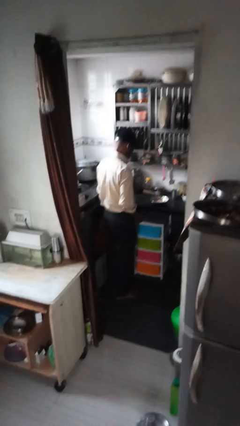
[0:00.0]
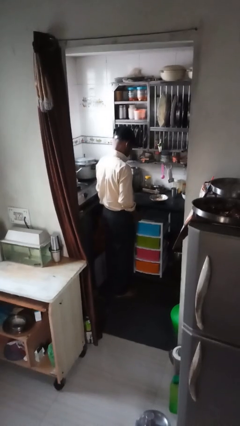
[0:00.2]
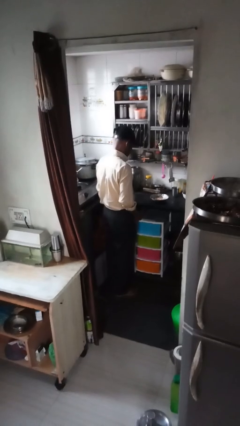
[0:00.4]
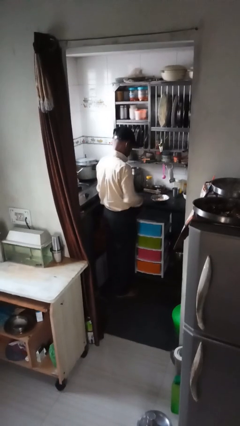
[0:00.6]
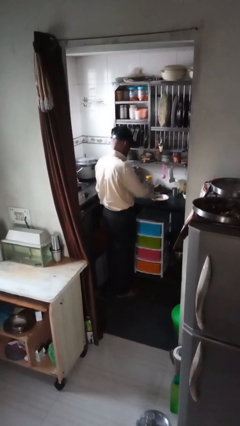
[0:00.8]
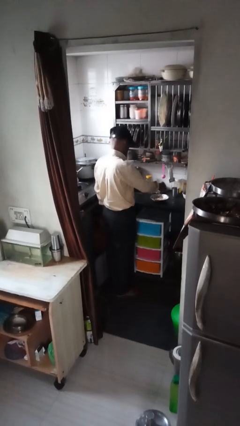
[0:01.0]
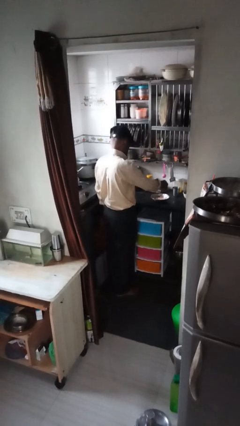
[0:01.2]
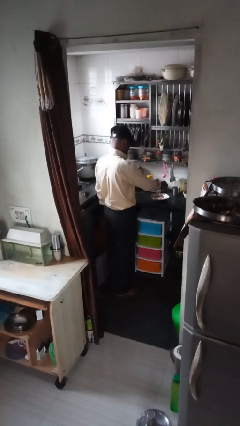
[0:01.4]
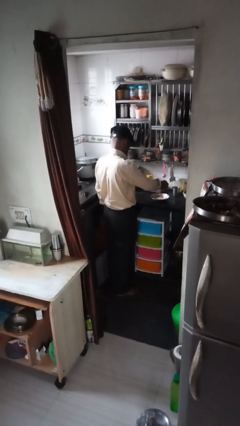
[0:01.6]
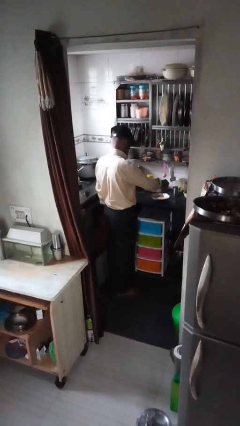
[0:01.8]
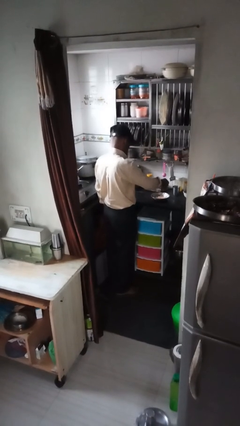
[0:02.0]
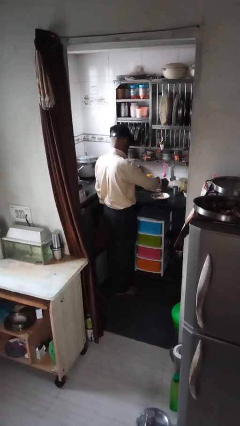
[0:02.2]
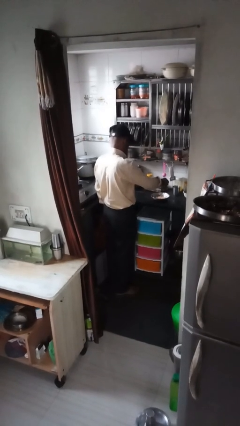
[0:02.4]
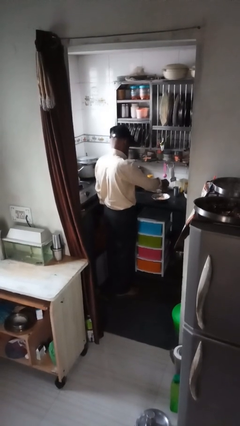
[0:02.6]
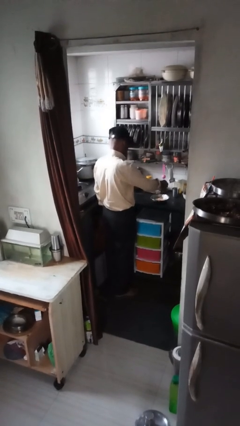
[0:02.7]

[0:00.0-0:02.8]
person pours into bowl

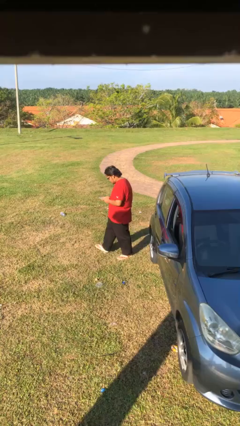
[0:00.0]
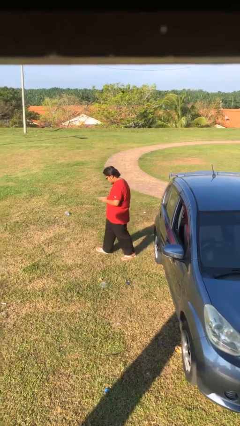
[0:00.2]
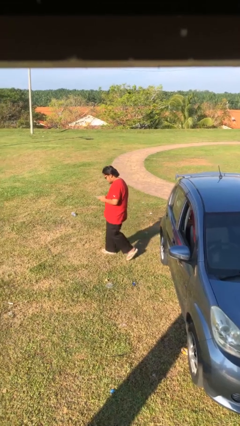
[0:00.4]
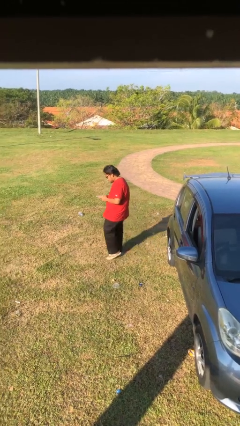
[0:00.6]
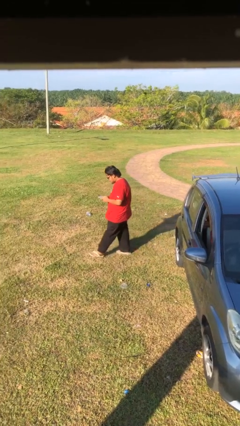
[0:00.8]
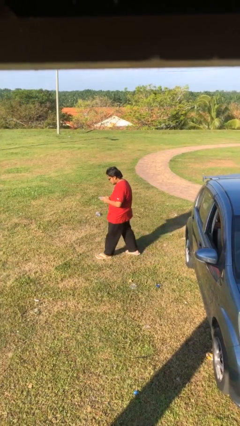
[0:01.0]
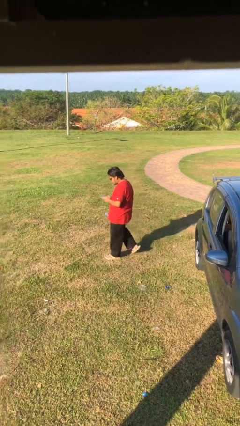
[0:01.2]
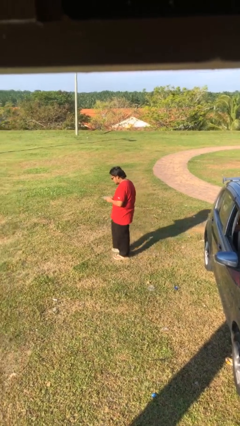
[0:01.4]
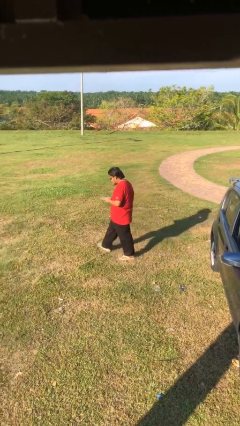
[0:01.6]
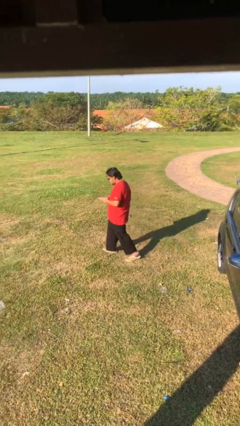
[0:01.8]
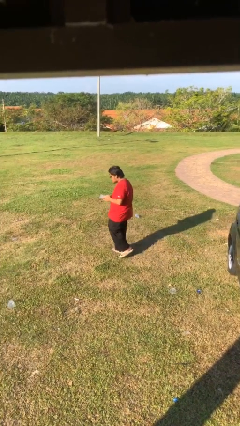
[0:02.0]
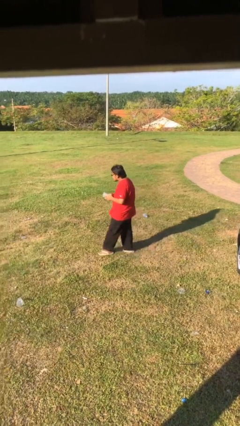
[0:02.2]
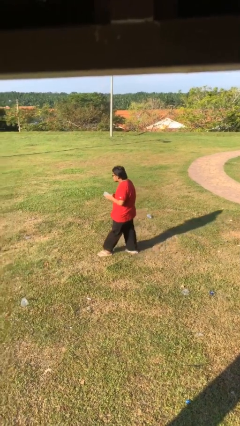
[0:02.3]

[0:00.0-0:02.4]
person texts on phone

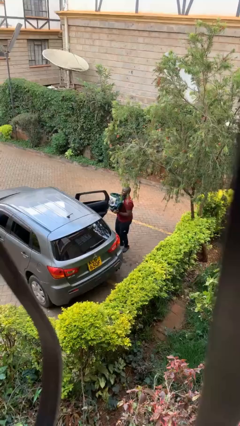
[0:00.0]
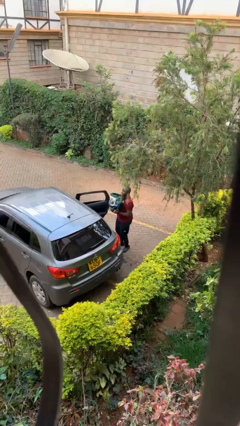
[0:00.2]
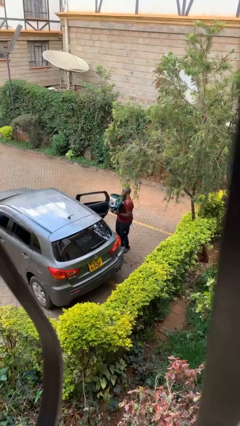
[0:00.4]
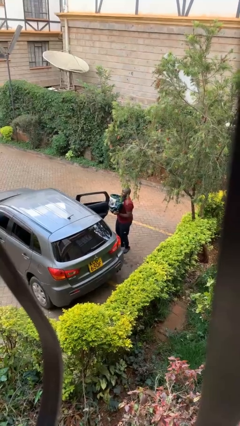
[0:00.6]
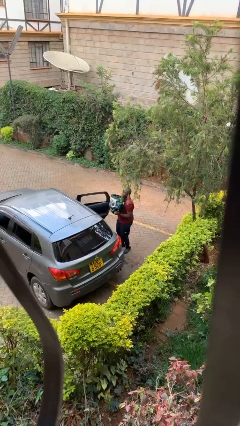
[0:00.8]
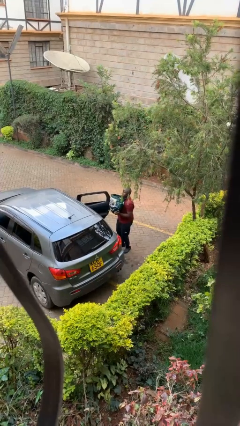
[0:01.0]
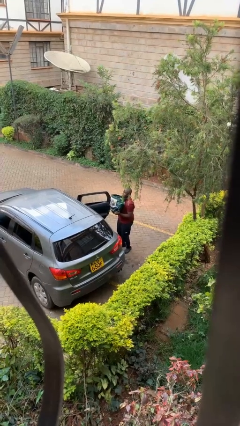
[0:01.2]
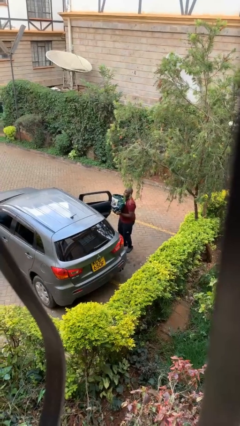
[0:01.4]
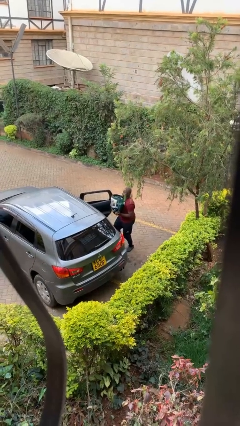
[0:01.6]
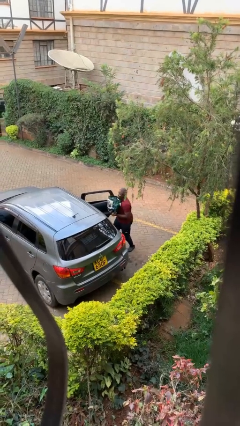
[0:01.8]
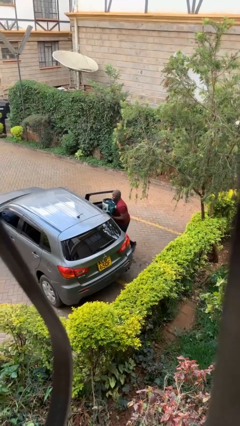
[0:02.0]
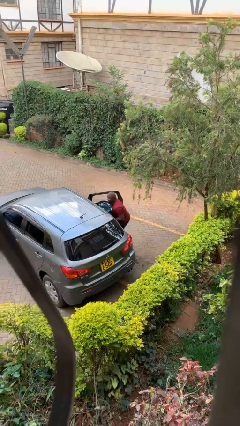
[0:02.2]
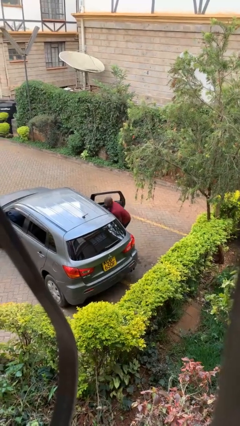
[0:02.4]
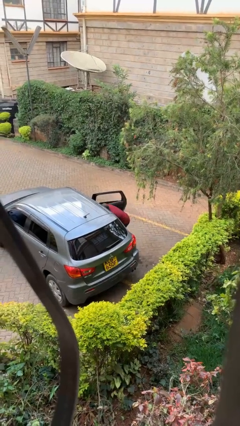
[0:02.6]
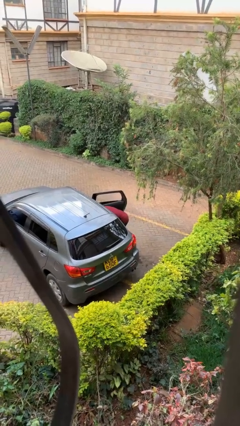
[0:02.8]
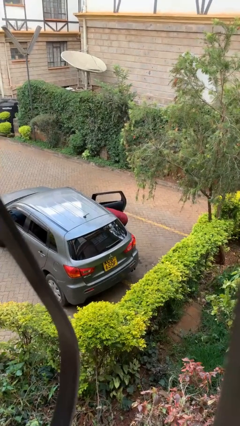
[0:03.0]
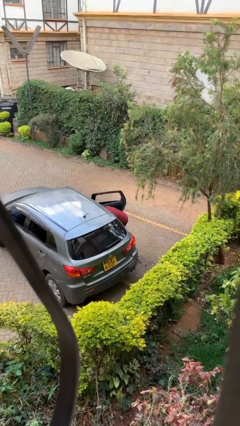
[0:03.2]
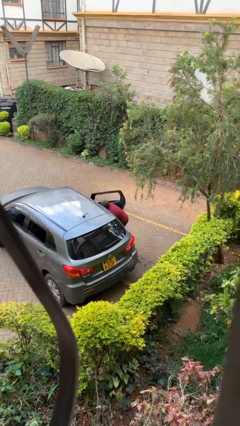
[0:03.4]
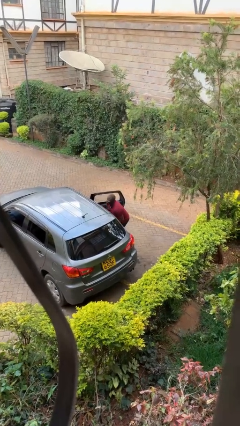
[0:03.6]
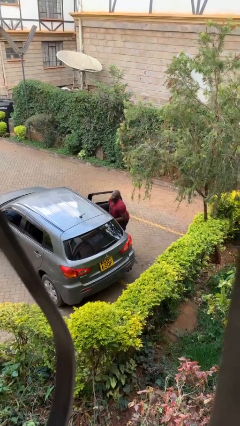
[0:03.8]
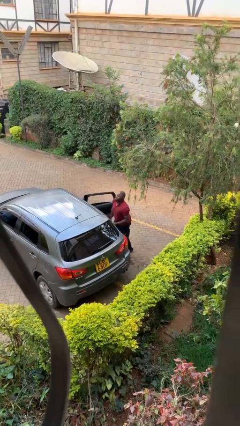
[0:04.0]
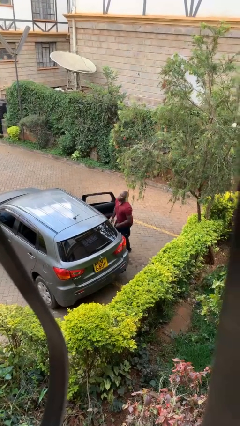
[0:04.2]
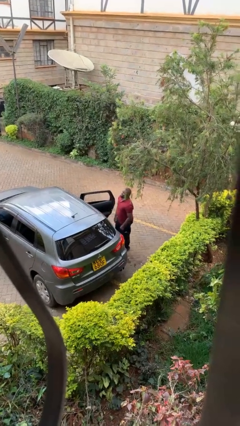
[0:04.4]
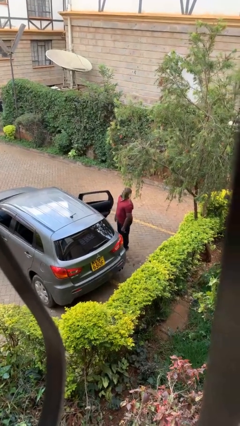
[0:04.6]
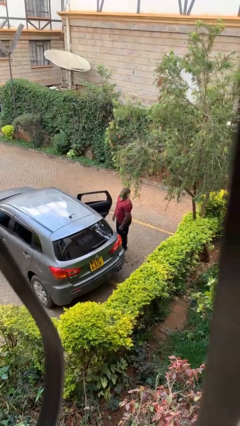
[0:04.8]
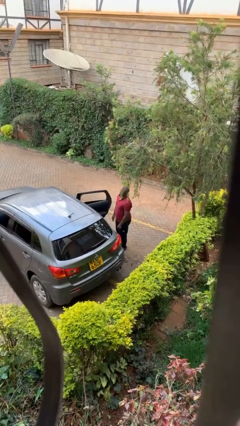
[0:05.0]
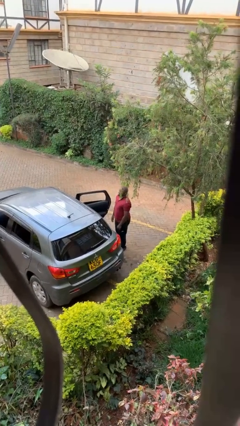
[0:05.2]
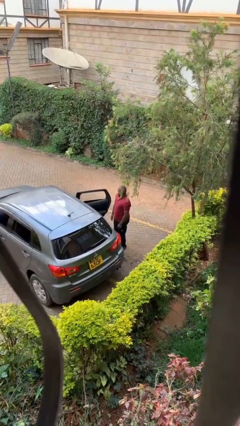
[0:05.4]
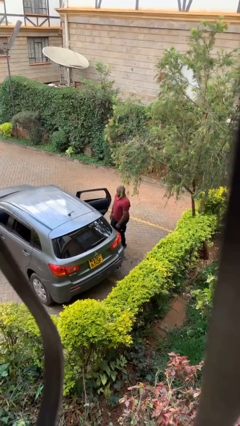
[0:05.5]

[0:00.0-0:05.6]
person loads car

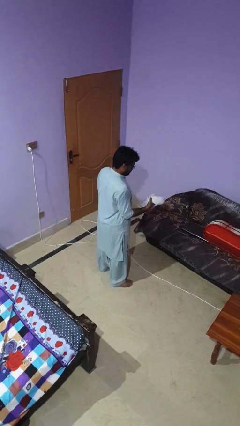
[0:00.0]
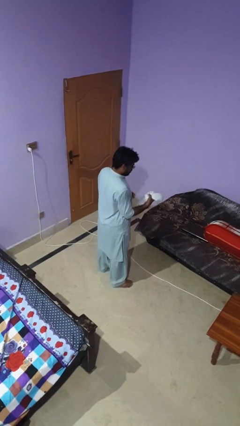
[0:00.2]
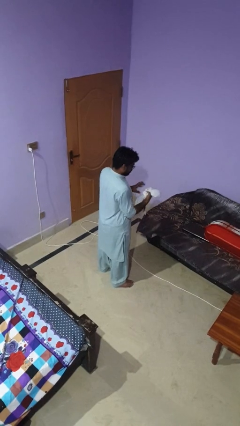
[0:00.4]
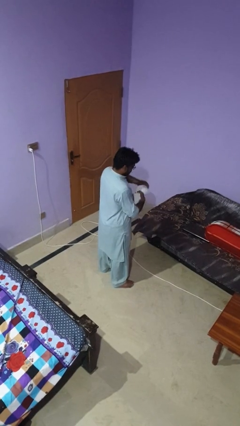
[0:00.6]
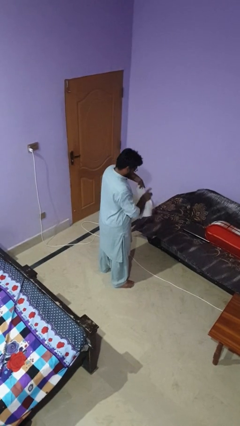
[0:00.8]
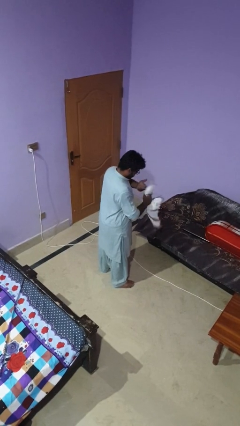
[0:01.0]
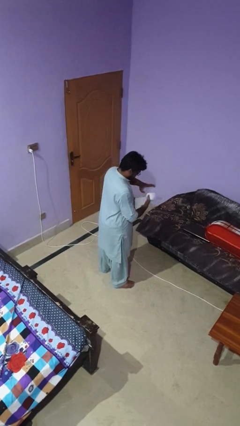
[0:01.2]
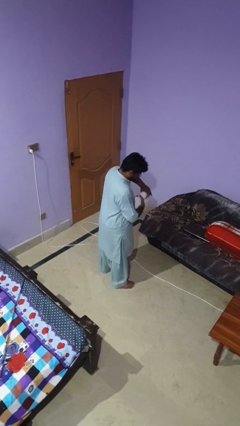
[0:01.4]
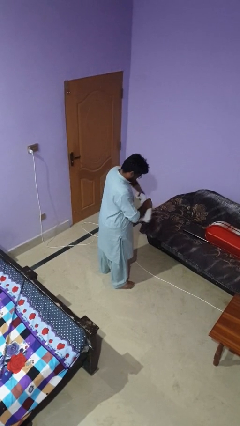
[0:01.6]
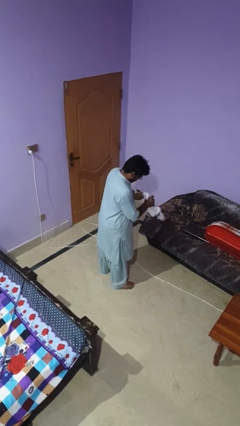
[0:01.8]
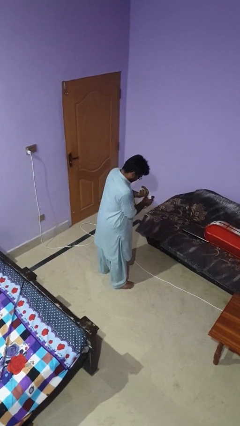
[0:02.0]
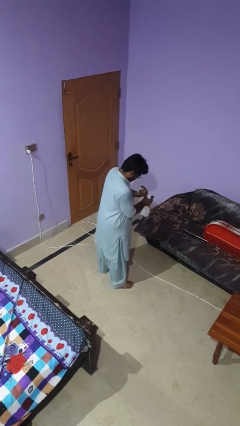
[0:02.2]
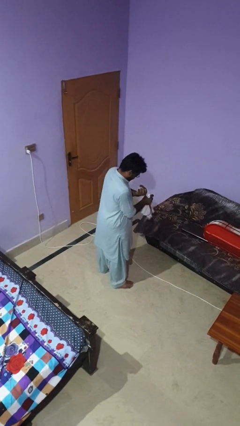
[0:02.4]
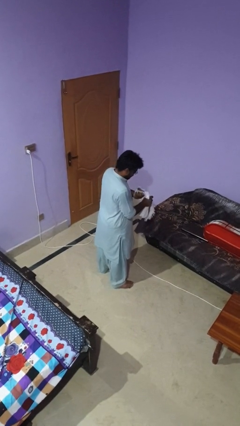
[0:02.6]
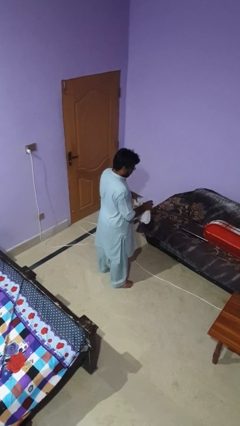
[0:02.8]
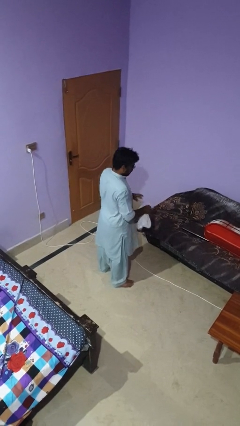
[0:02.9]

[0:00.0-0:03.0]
person squeezes object

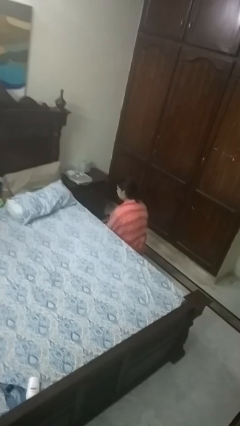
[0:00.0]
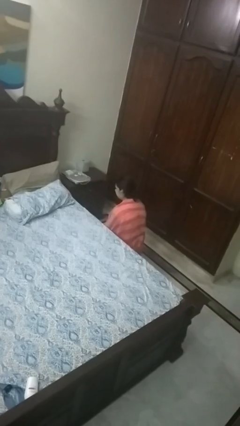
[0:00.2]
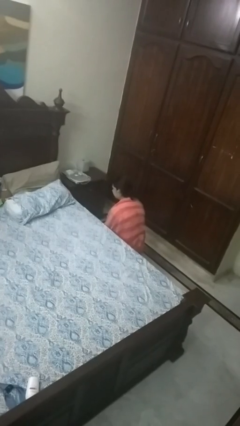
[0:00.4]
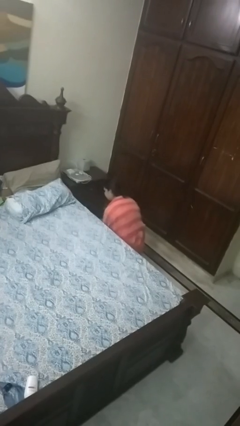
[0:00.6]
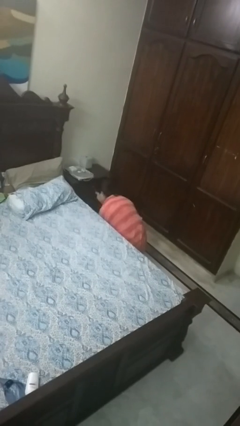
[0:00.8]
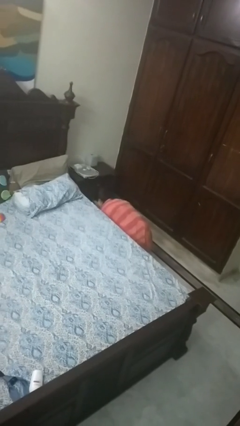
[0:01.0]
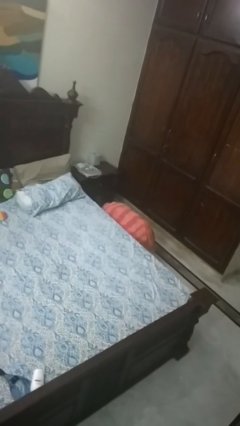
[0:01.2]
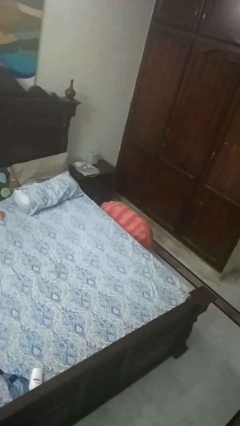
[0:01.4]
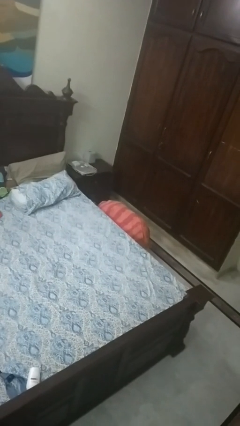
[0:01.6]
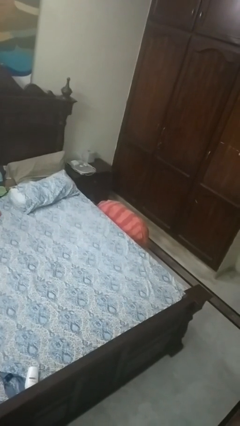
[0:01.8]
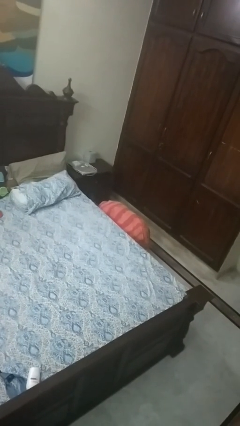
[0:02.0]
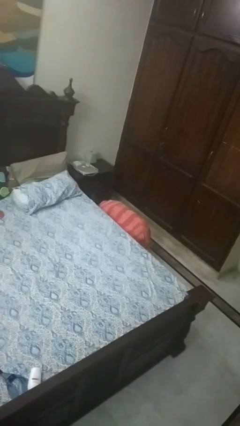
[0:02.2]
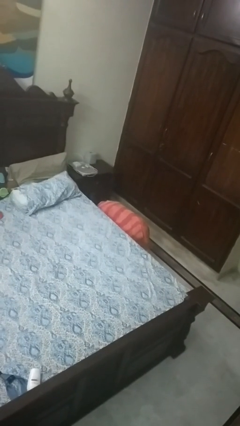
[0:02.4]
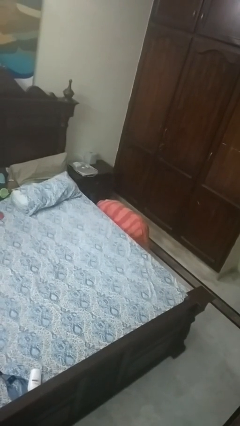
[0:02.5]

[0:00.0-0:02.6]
person searches under bed

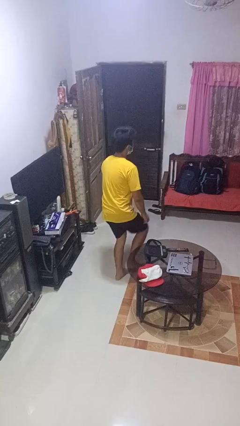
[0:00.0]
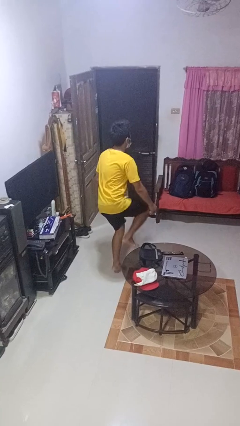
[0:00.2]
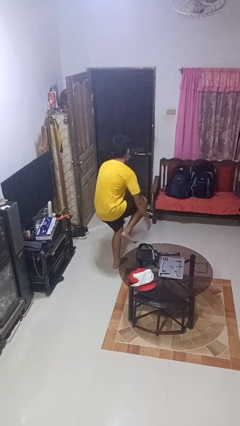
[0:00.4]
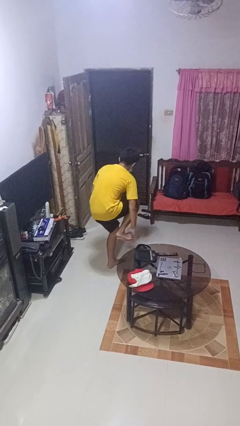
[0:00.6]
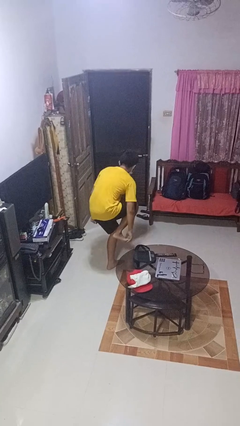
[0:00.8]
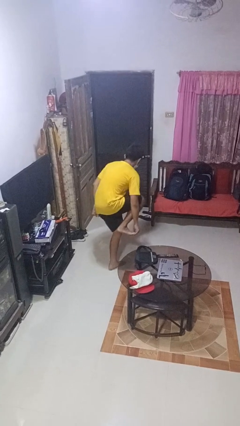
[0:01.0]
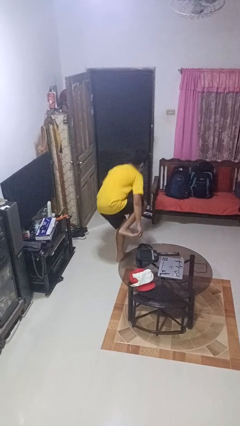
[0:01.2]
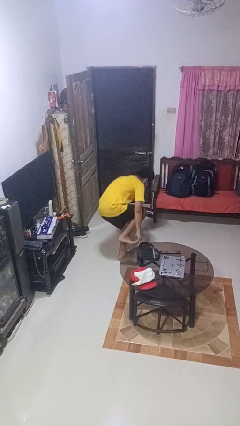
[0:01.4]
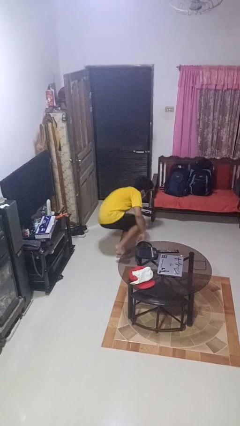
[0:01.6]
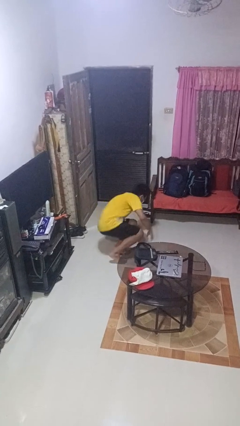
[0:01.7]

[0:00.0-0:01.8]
person trips on object on floor
